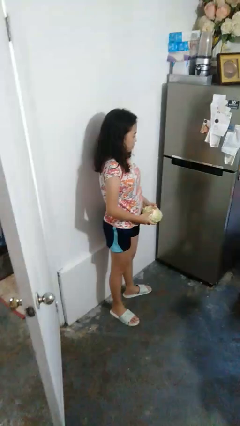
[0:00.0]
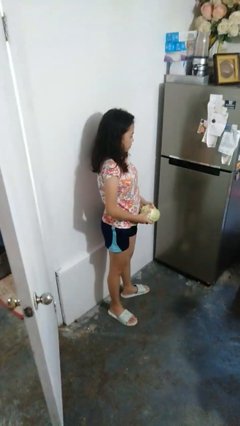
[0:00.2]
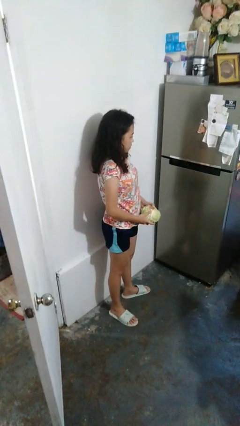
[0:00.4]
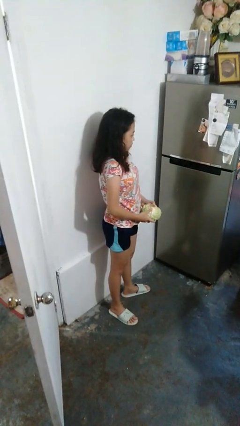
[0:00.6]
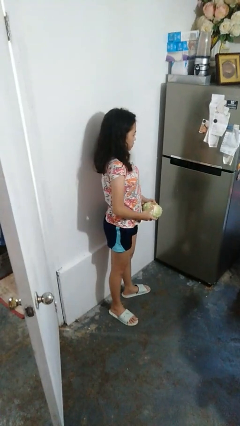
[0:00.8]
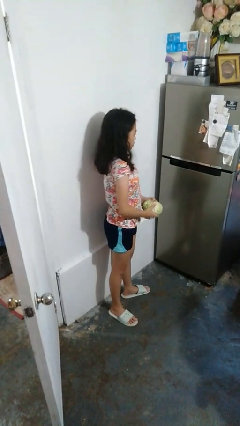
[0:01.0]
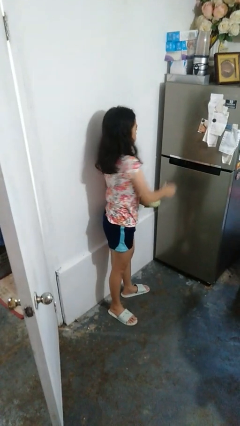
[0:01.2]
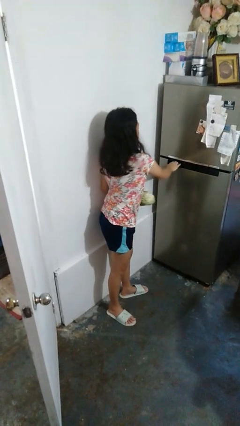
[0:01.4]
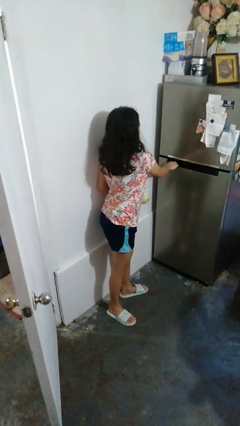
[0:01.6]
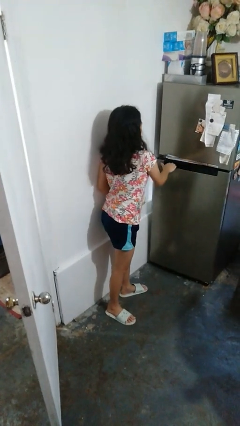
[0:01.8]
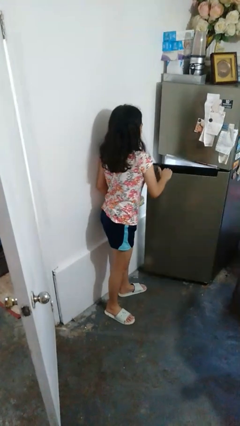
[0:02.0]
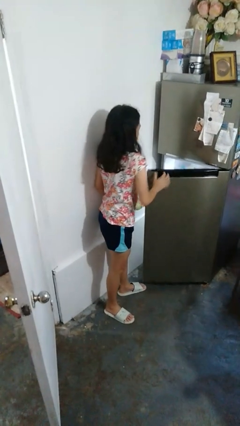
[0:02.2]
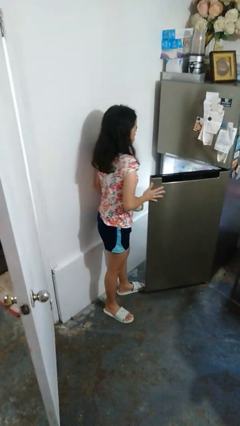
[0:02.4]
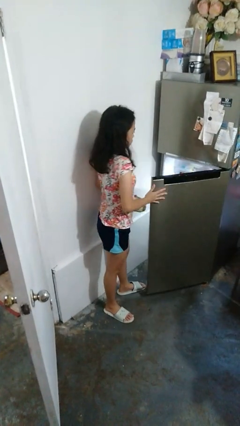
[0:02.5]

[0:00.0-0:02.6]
person opens refrigerator

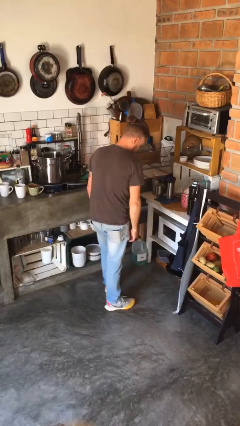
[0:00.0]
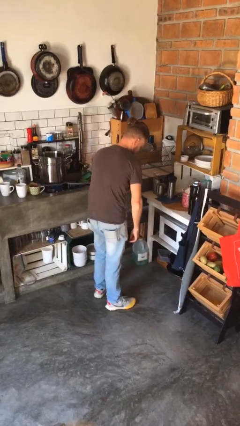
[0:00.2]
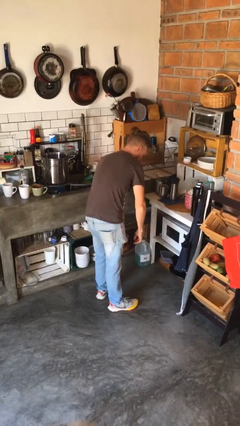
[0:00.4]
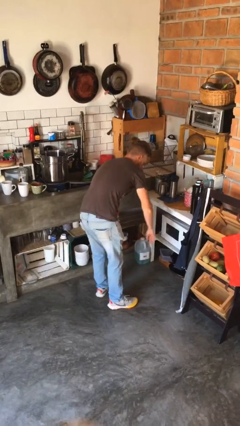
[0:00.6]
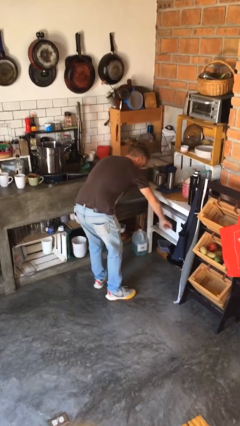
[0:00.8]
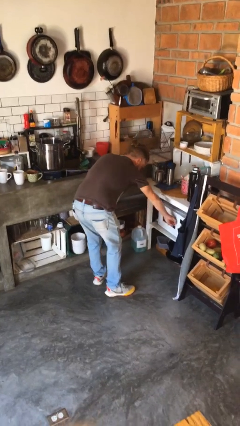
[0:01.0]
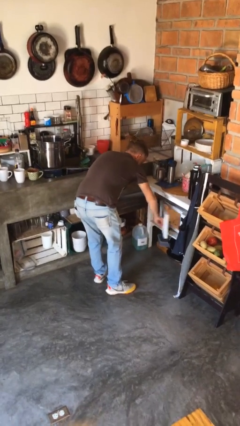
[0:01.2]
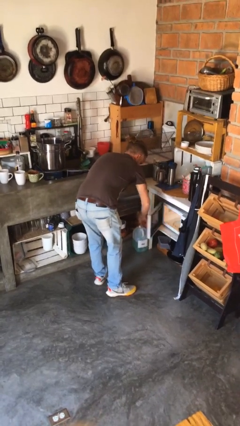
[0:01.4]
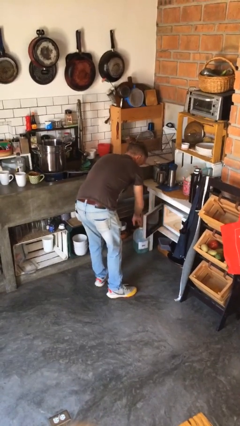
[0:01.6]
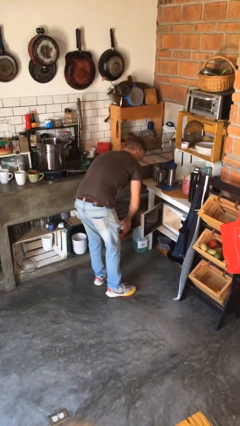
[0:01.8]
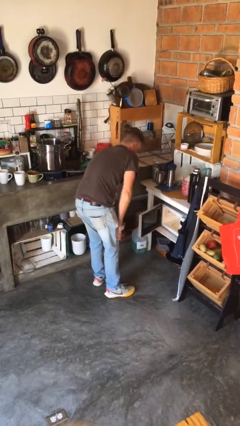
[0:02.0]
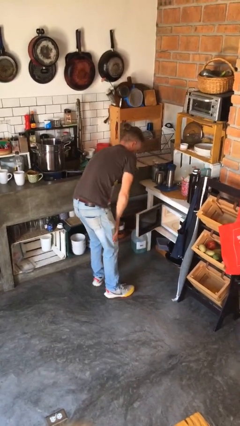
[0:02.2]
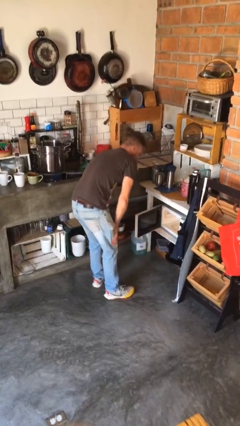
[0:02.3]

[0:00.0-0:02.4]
person opens microwave

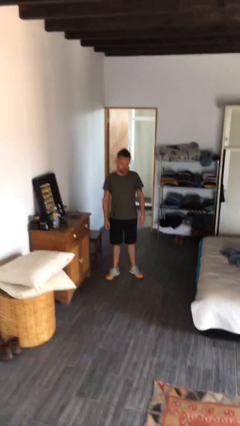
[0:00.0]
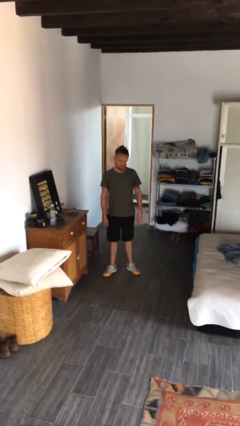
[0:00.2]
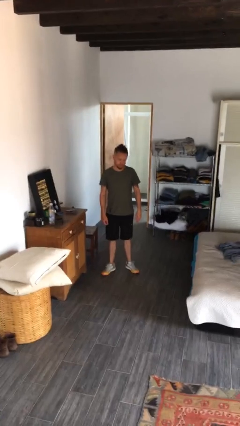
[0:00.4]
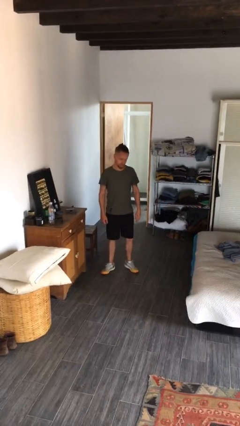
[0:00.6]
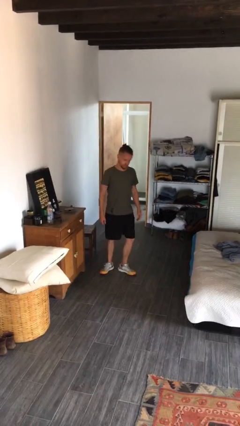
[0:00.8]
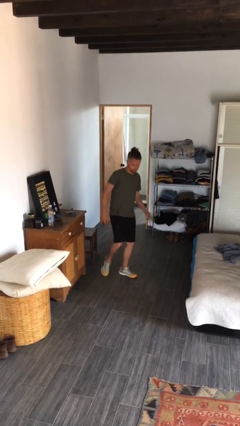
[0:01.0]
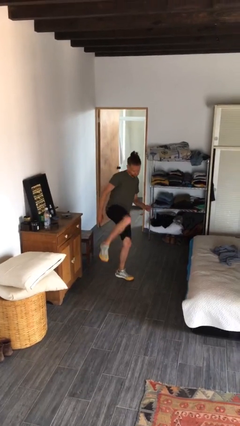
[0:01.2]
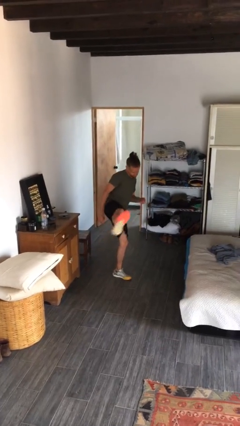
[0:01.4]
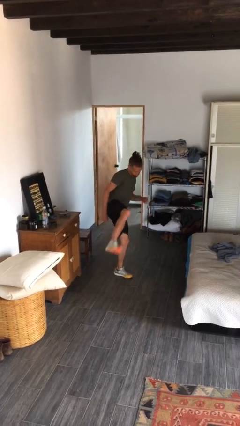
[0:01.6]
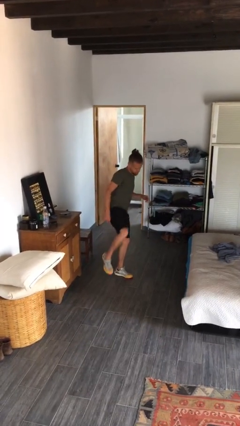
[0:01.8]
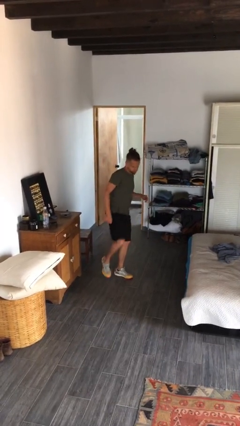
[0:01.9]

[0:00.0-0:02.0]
person karate kicks

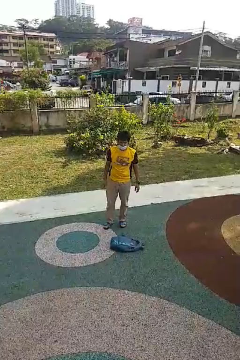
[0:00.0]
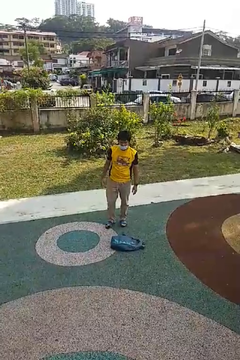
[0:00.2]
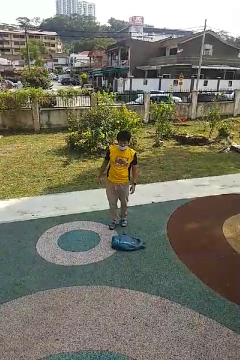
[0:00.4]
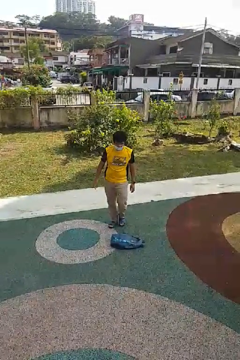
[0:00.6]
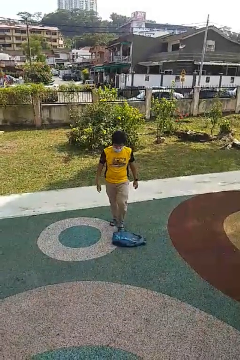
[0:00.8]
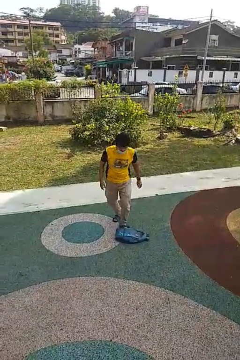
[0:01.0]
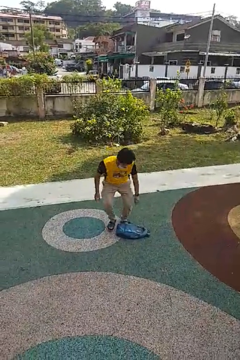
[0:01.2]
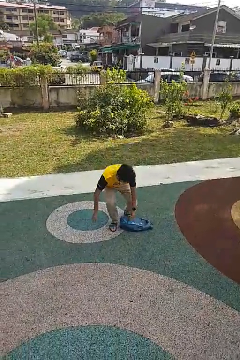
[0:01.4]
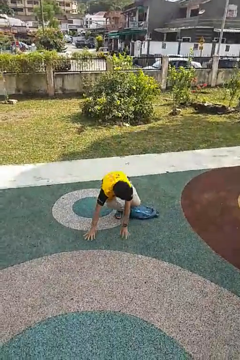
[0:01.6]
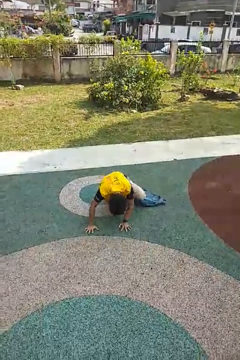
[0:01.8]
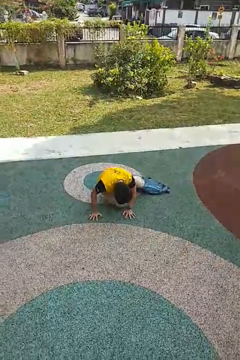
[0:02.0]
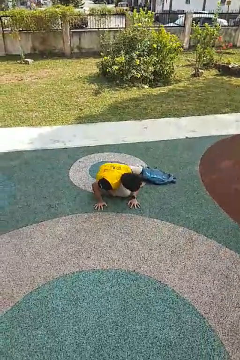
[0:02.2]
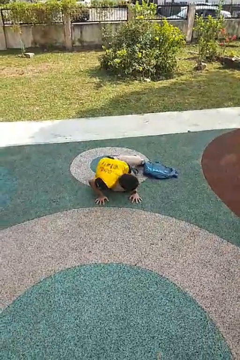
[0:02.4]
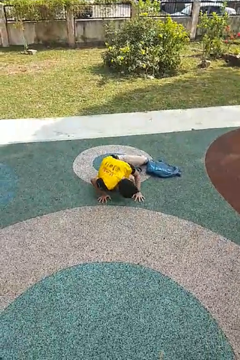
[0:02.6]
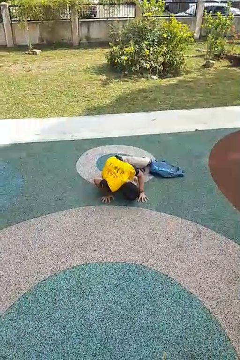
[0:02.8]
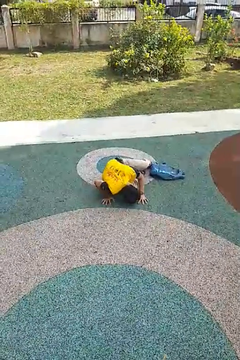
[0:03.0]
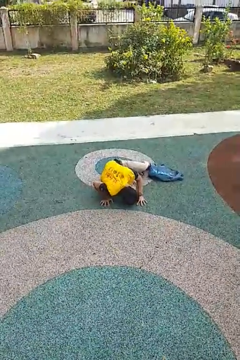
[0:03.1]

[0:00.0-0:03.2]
person trips on object on floor

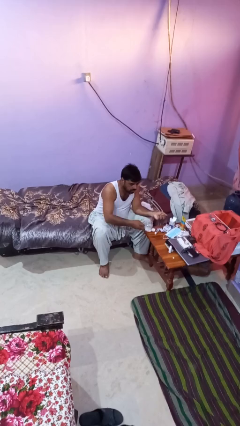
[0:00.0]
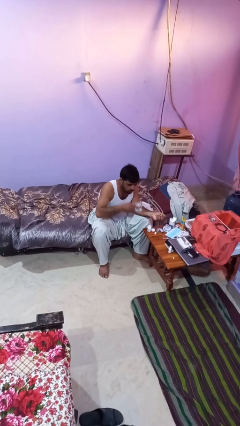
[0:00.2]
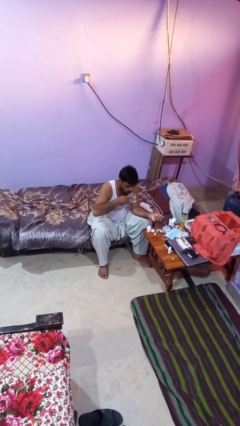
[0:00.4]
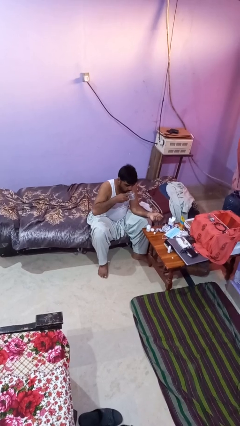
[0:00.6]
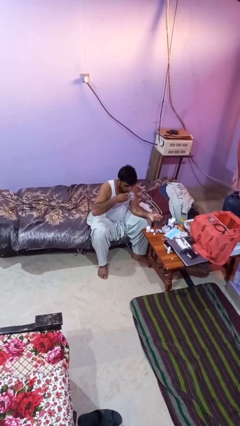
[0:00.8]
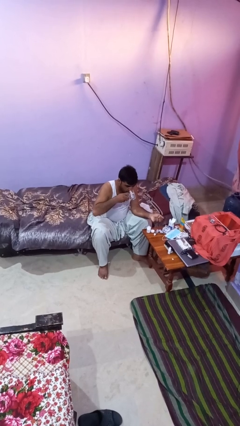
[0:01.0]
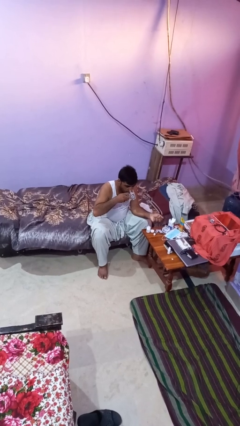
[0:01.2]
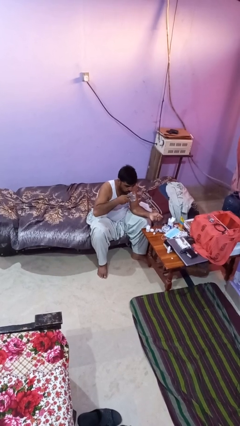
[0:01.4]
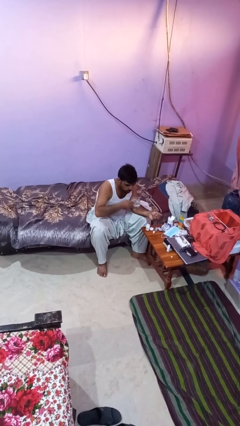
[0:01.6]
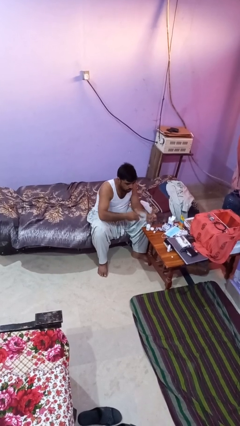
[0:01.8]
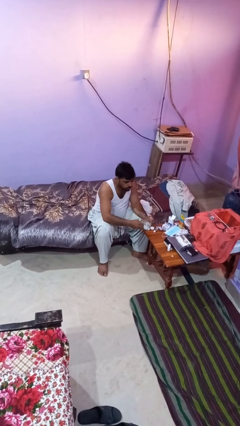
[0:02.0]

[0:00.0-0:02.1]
person drinks from cup

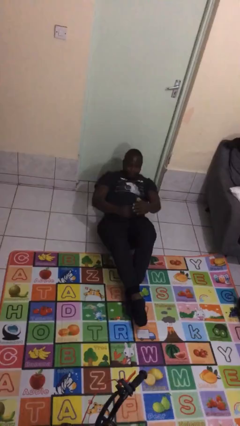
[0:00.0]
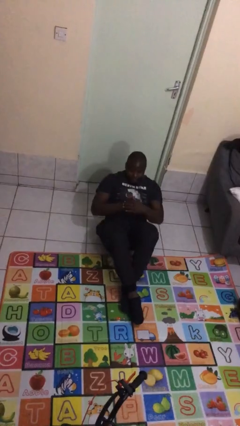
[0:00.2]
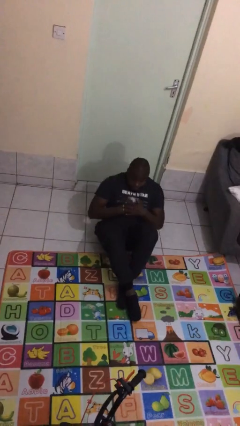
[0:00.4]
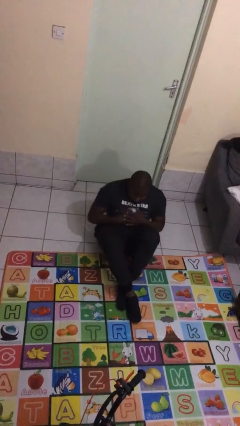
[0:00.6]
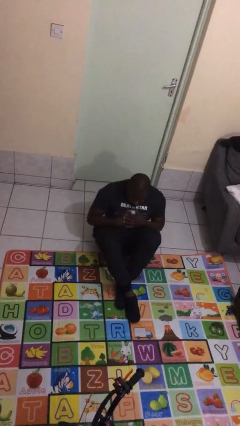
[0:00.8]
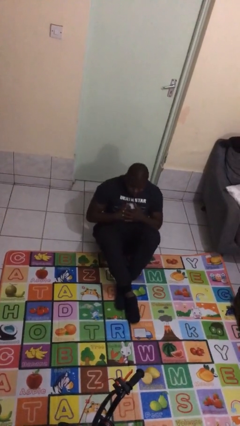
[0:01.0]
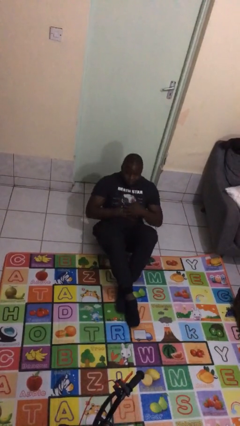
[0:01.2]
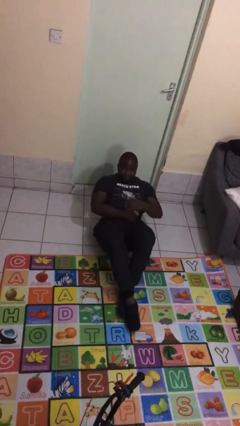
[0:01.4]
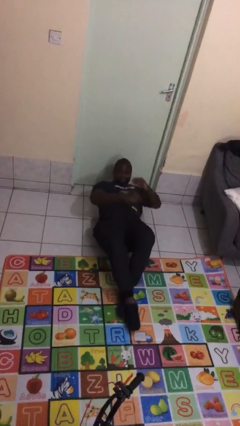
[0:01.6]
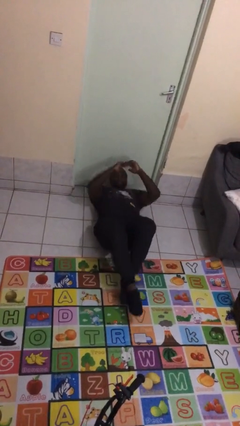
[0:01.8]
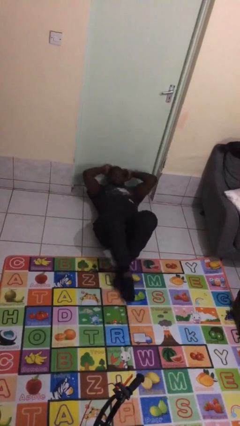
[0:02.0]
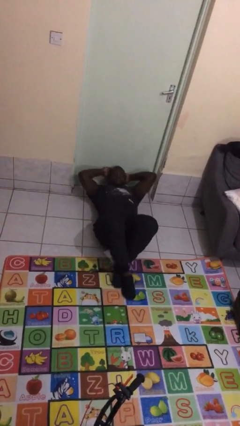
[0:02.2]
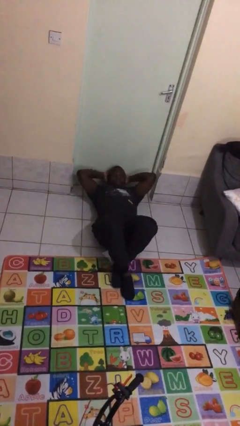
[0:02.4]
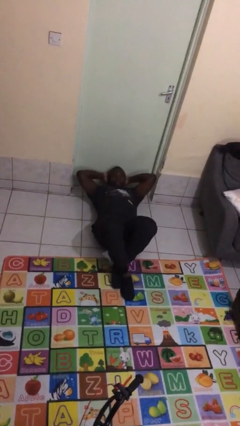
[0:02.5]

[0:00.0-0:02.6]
person exercises with situp

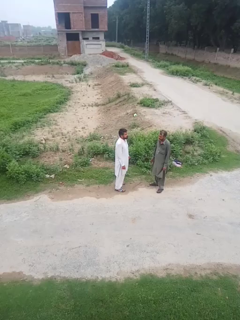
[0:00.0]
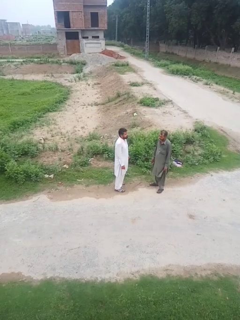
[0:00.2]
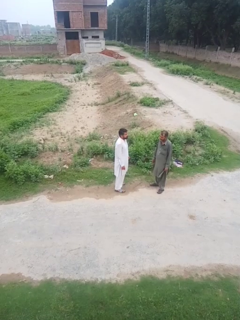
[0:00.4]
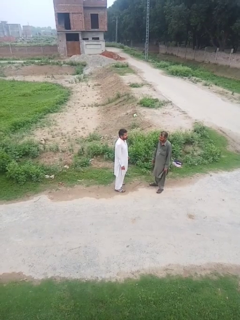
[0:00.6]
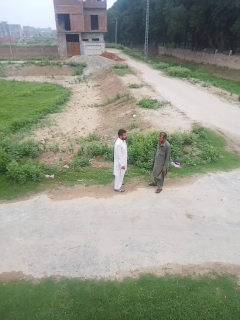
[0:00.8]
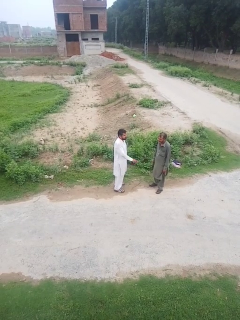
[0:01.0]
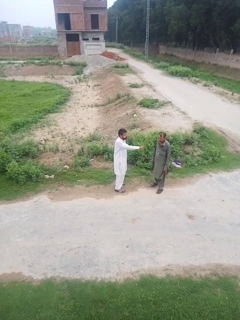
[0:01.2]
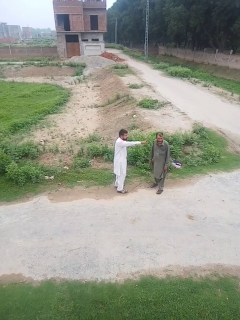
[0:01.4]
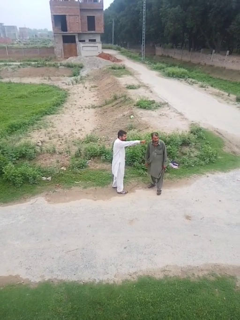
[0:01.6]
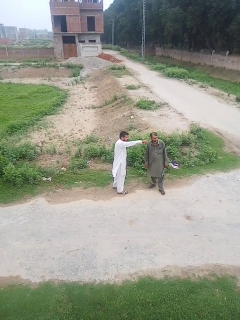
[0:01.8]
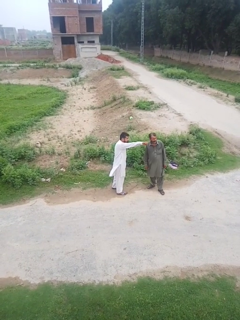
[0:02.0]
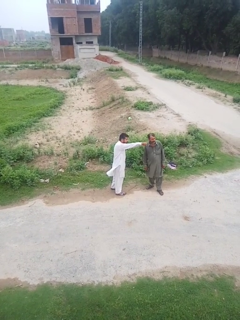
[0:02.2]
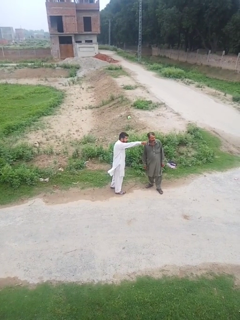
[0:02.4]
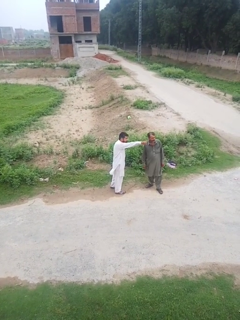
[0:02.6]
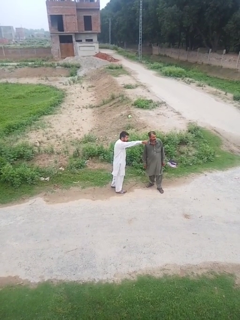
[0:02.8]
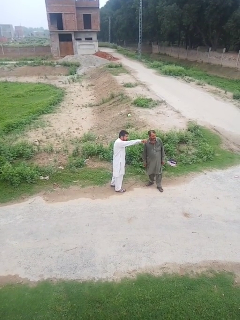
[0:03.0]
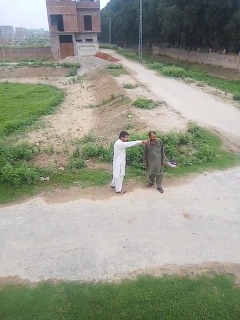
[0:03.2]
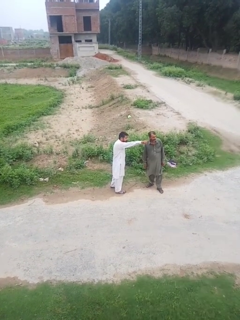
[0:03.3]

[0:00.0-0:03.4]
person points at person

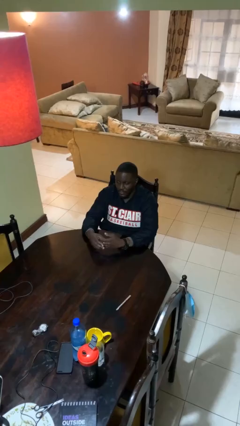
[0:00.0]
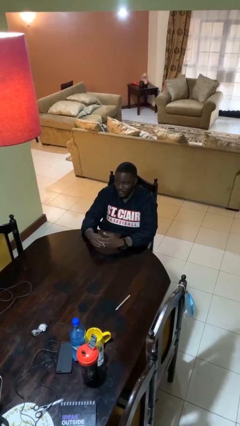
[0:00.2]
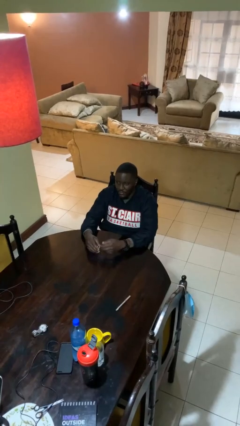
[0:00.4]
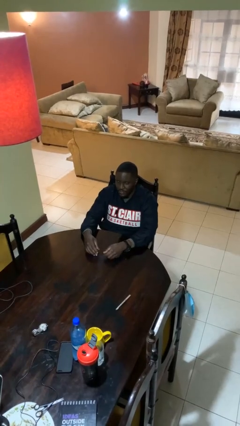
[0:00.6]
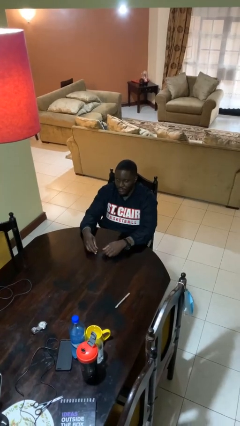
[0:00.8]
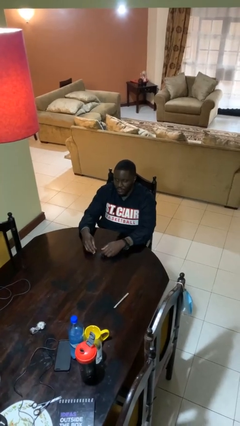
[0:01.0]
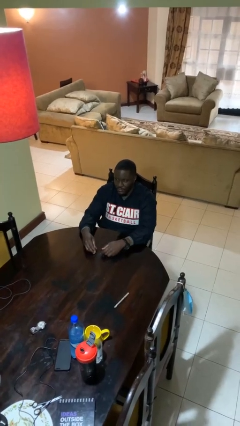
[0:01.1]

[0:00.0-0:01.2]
person takes off ring
